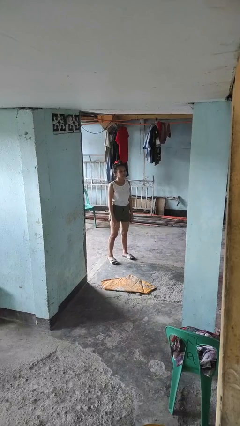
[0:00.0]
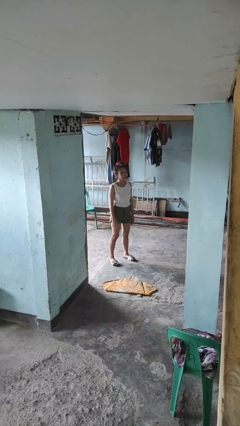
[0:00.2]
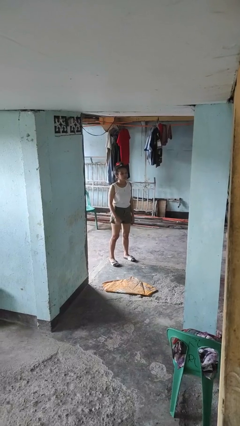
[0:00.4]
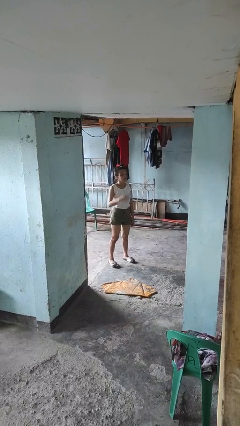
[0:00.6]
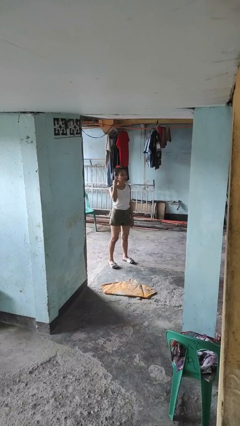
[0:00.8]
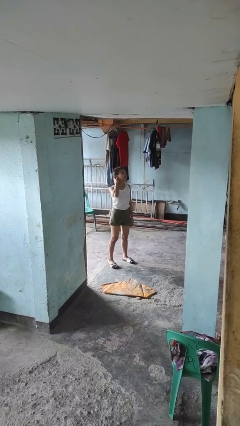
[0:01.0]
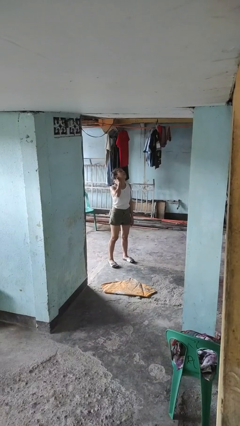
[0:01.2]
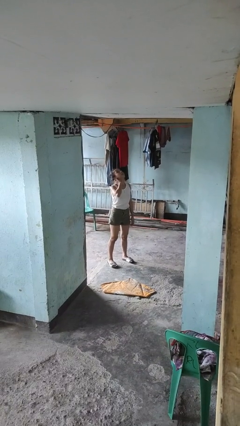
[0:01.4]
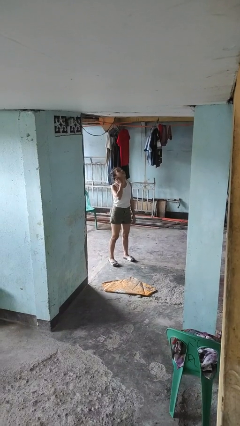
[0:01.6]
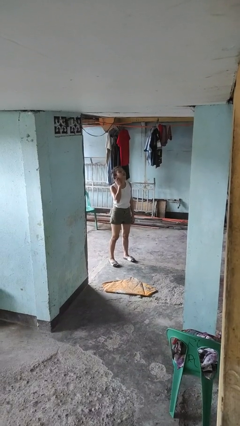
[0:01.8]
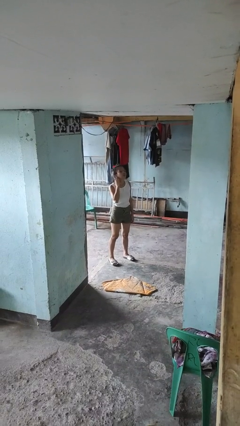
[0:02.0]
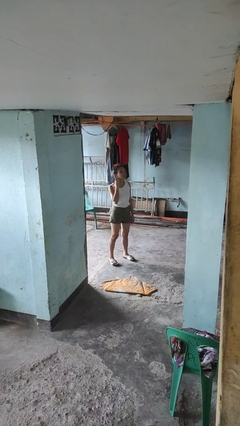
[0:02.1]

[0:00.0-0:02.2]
person rubs neck

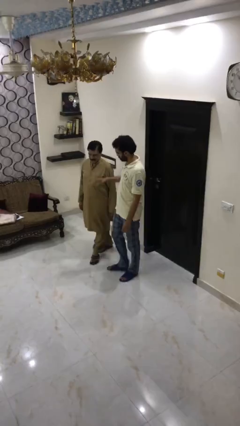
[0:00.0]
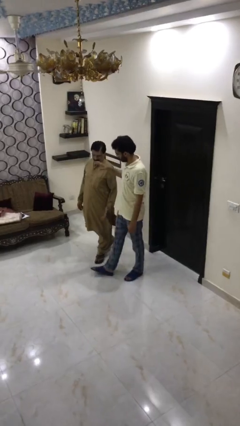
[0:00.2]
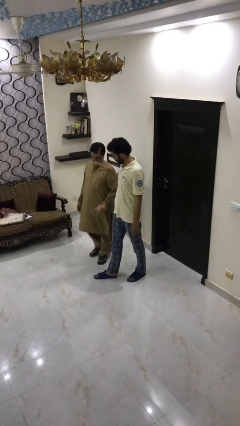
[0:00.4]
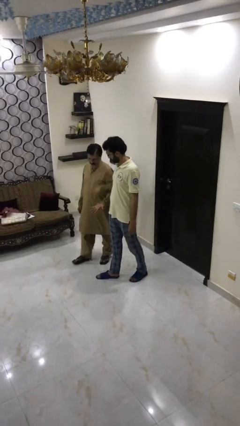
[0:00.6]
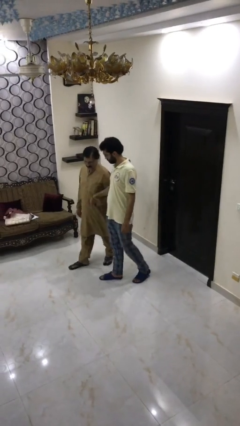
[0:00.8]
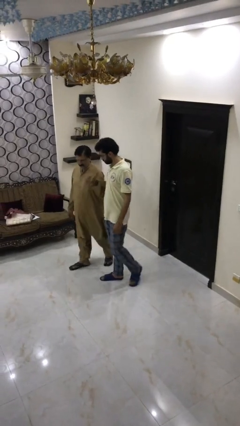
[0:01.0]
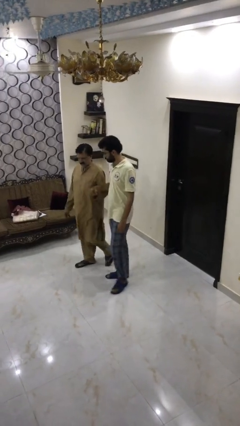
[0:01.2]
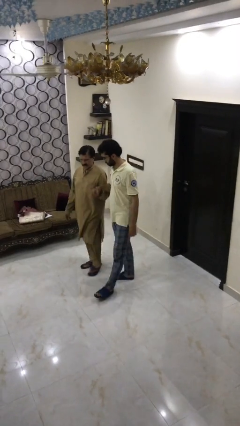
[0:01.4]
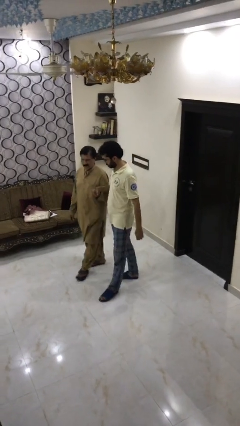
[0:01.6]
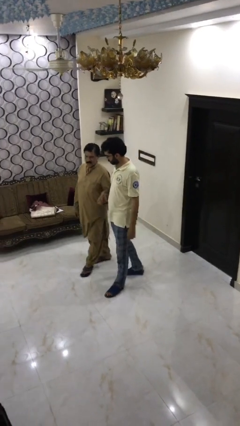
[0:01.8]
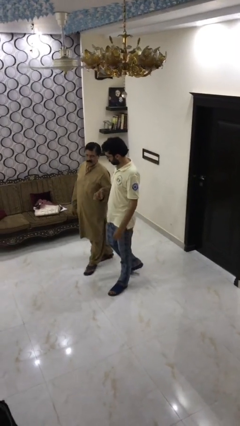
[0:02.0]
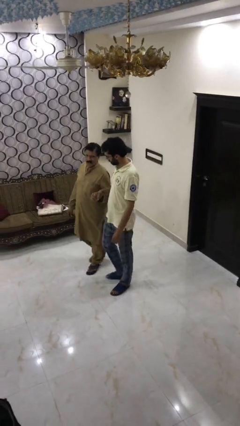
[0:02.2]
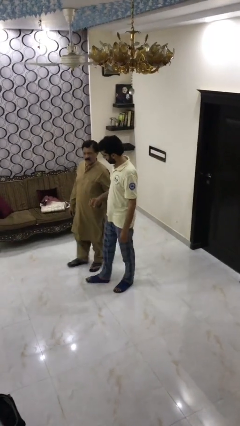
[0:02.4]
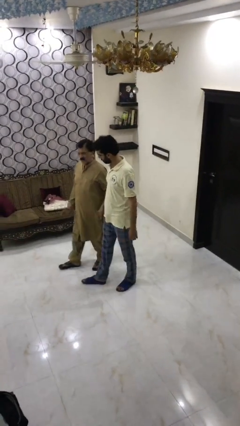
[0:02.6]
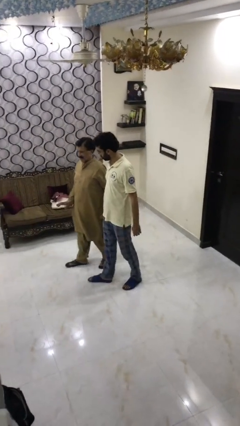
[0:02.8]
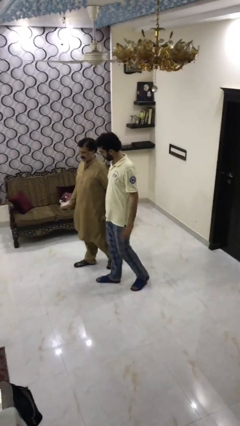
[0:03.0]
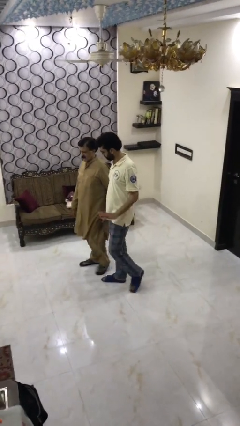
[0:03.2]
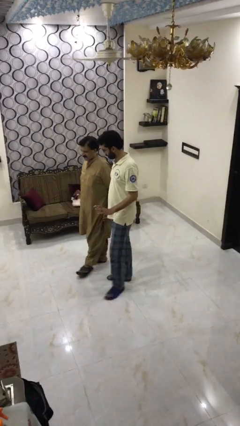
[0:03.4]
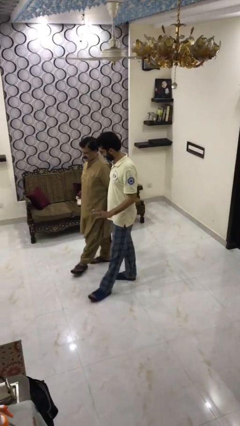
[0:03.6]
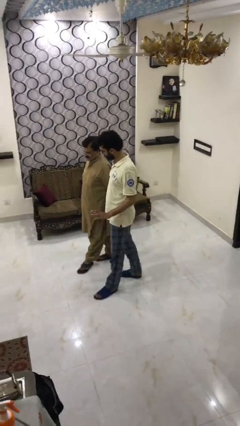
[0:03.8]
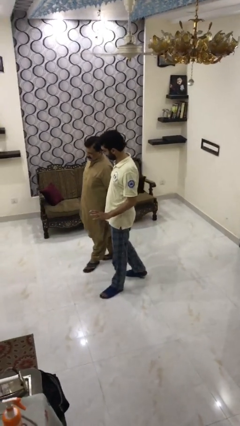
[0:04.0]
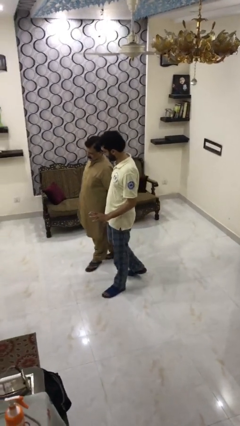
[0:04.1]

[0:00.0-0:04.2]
person holds hand

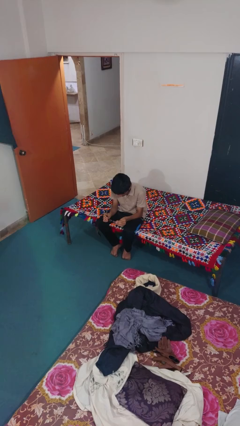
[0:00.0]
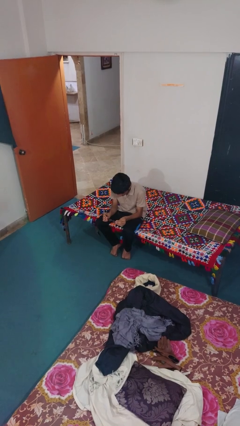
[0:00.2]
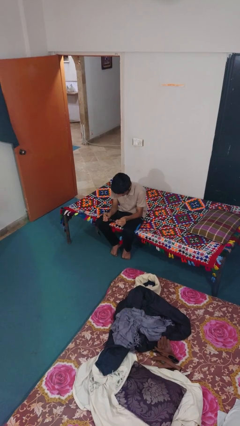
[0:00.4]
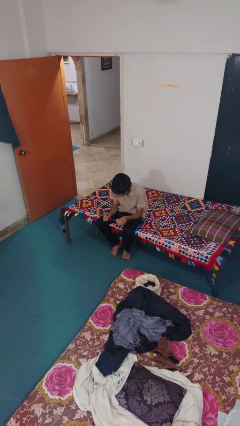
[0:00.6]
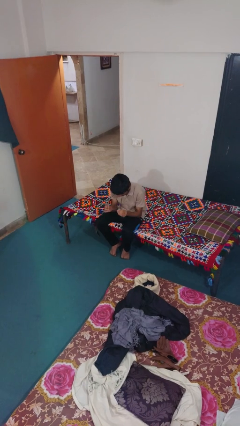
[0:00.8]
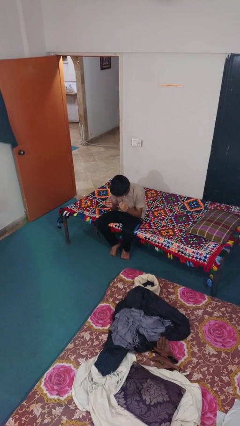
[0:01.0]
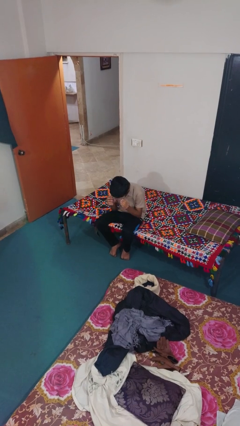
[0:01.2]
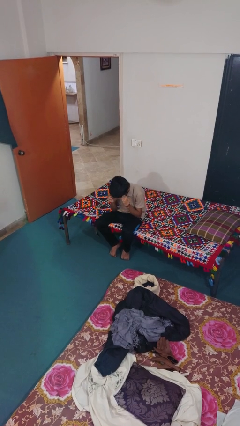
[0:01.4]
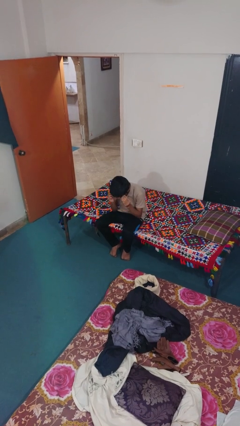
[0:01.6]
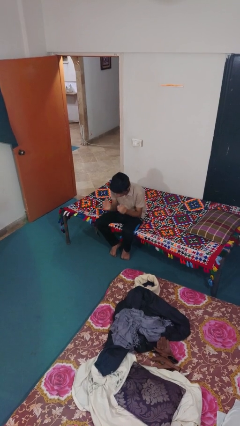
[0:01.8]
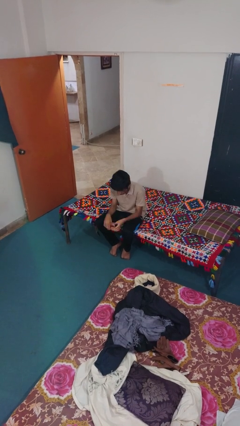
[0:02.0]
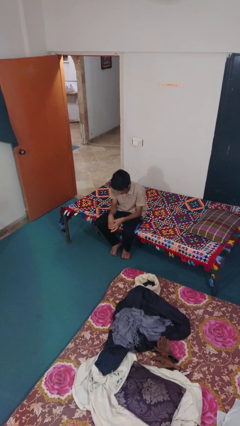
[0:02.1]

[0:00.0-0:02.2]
person puts on glasses

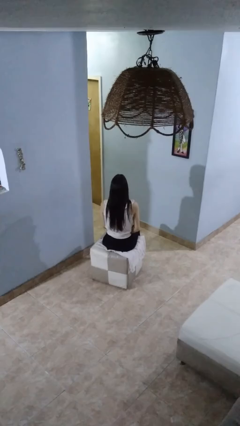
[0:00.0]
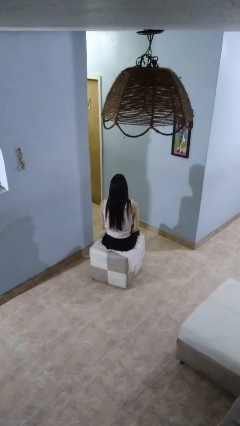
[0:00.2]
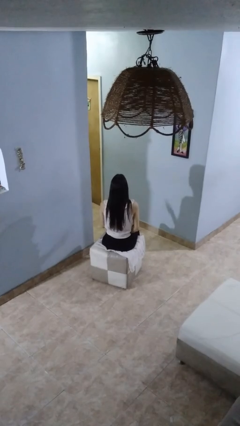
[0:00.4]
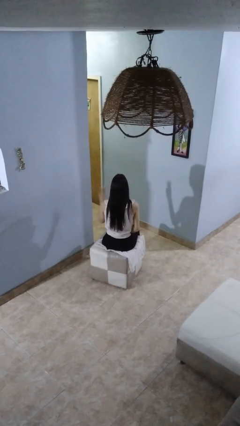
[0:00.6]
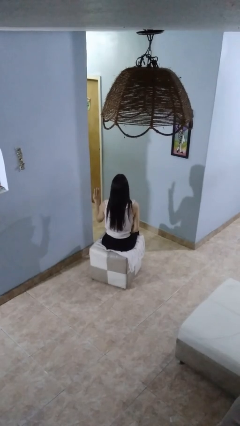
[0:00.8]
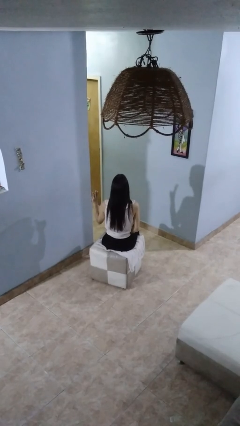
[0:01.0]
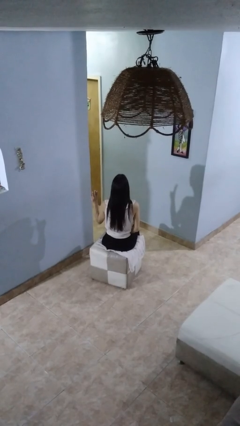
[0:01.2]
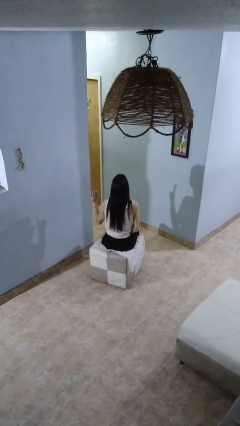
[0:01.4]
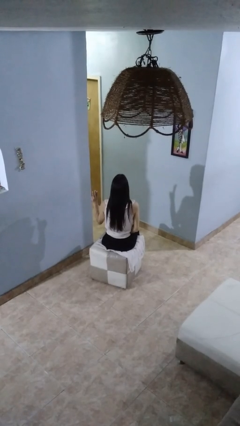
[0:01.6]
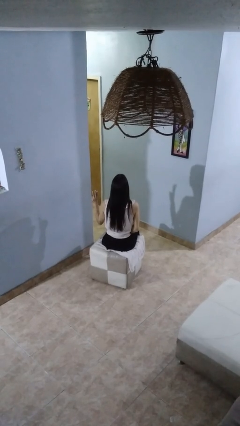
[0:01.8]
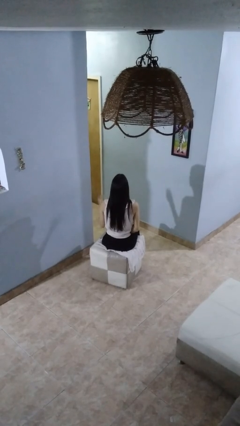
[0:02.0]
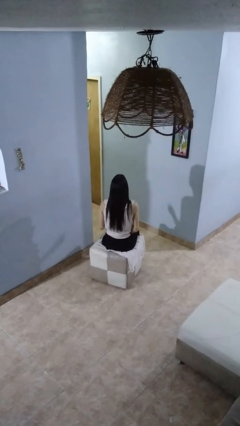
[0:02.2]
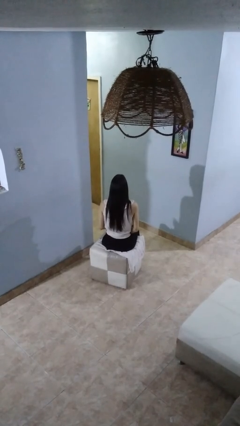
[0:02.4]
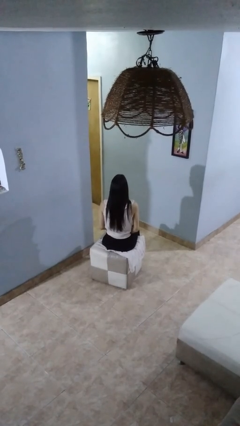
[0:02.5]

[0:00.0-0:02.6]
person gestures number three

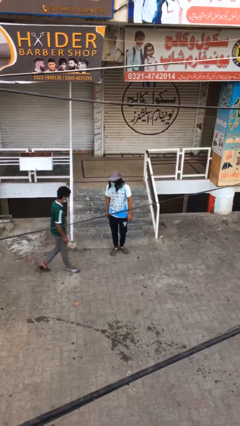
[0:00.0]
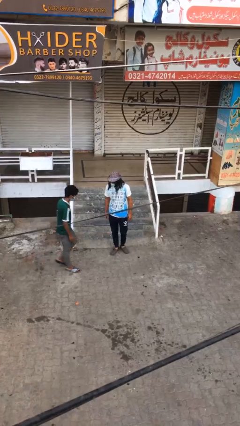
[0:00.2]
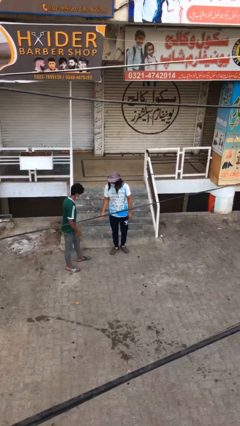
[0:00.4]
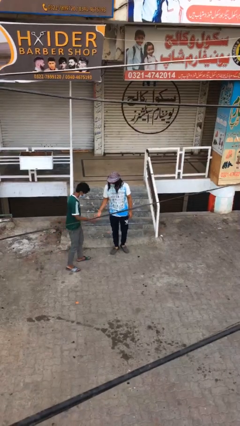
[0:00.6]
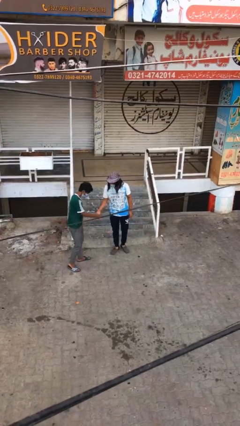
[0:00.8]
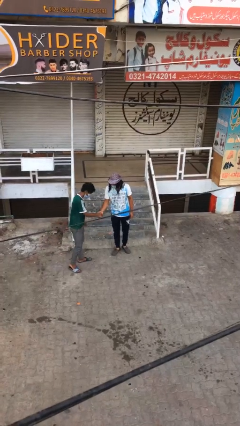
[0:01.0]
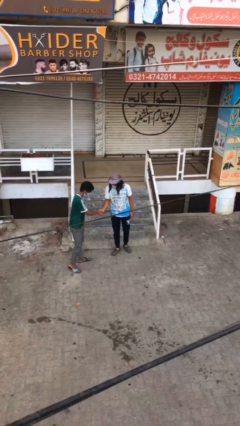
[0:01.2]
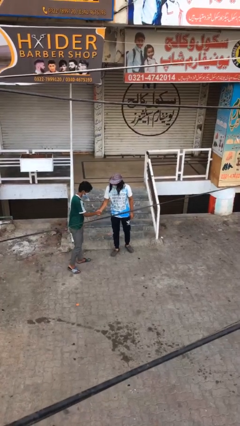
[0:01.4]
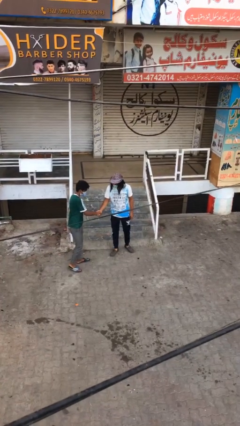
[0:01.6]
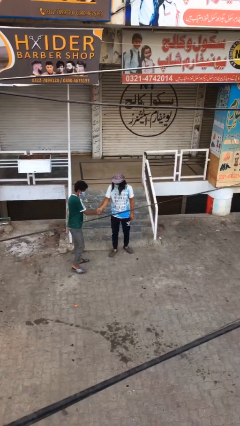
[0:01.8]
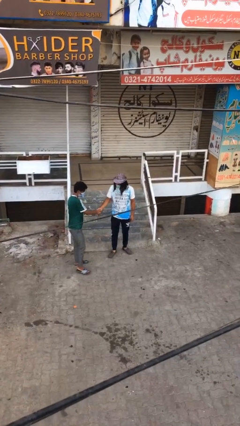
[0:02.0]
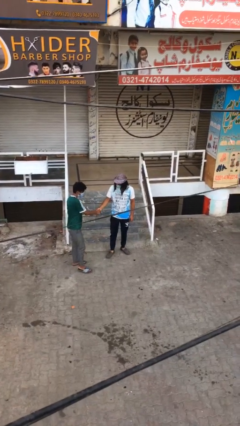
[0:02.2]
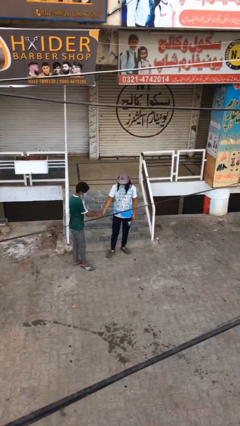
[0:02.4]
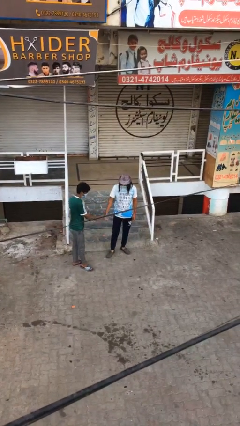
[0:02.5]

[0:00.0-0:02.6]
person shakes hand

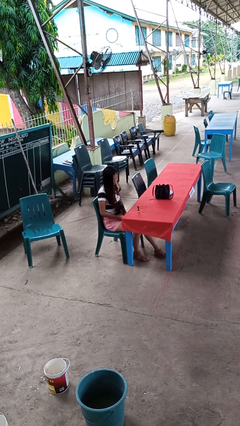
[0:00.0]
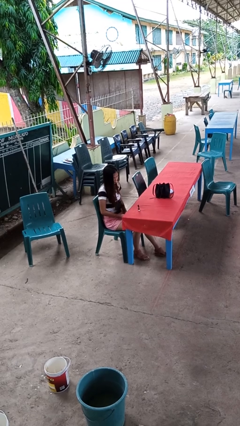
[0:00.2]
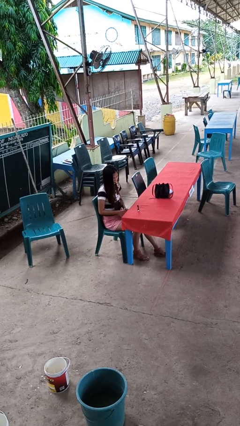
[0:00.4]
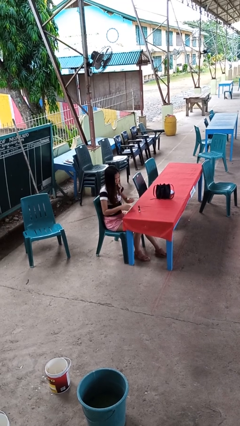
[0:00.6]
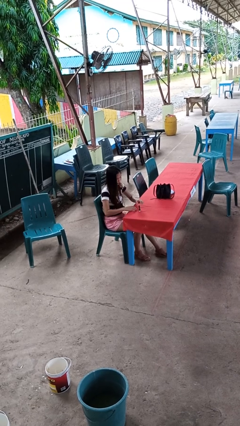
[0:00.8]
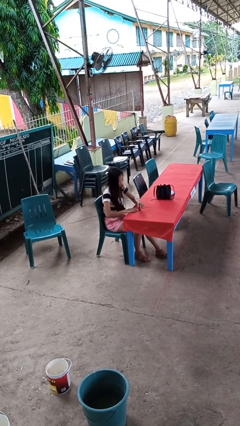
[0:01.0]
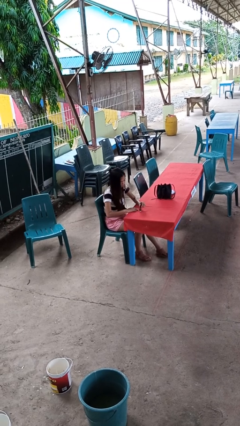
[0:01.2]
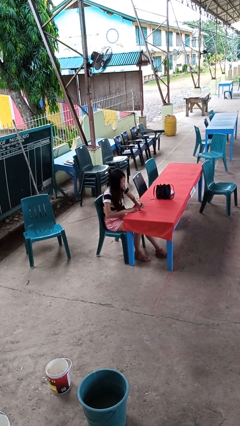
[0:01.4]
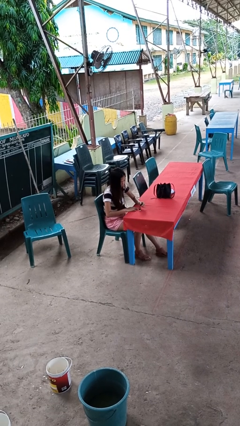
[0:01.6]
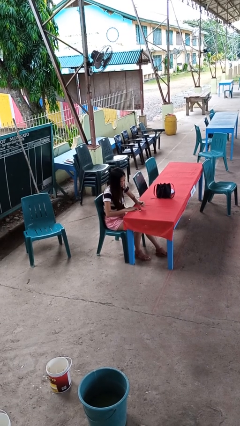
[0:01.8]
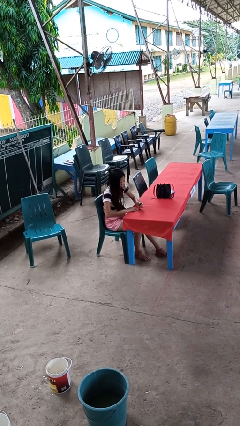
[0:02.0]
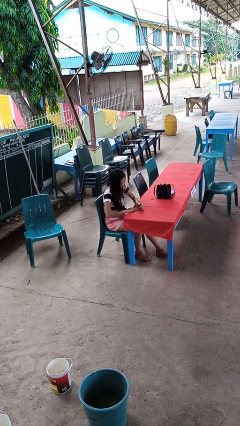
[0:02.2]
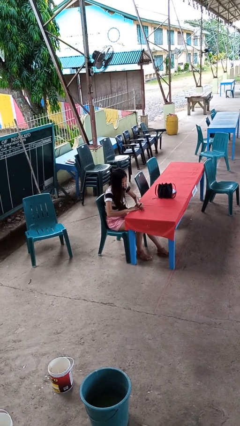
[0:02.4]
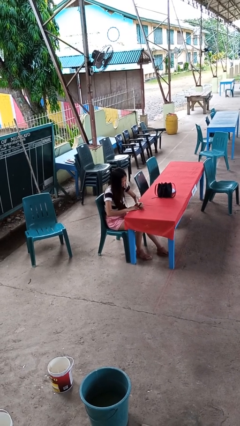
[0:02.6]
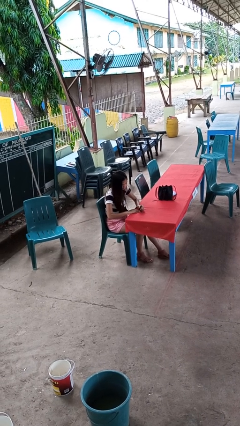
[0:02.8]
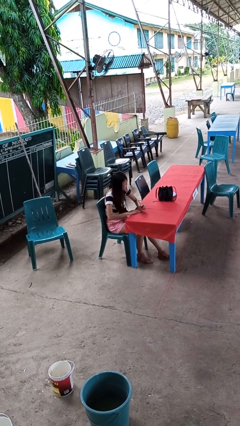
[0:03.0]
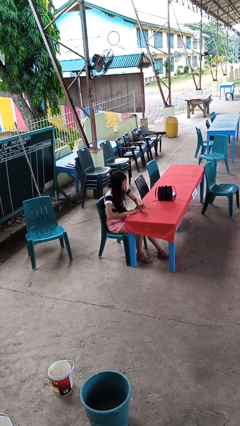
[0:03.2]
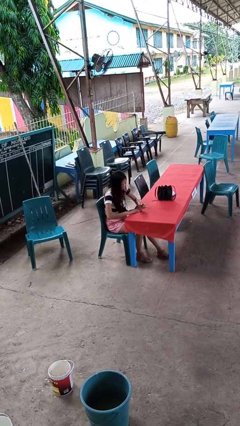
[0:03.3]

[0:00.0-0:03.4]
person paints fingernails
